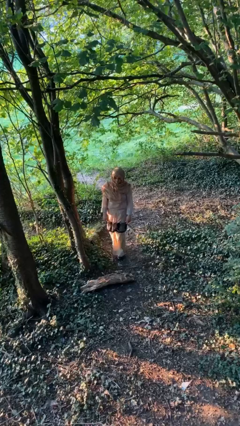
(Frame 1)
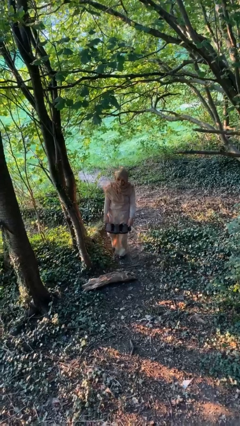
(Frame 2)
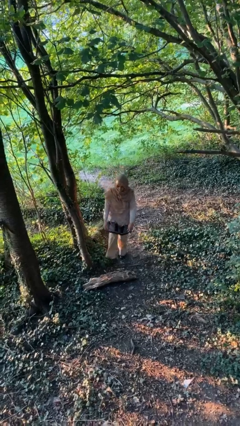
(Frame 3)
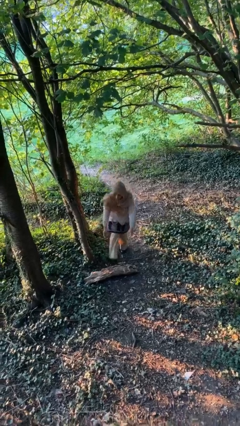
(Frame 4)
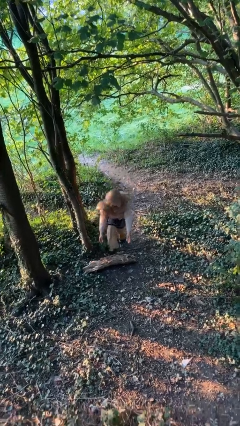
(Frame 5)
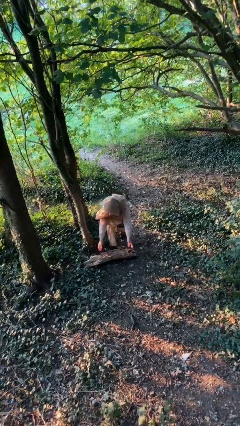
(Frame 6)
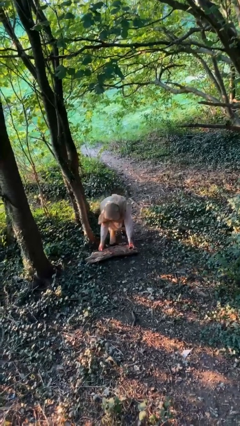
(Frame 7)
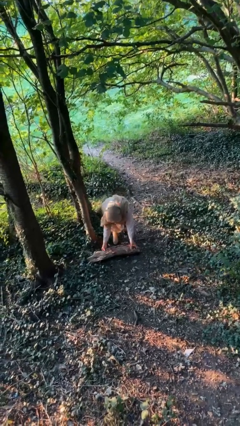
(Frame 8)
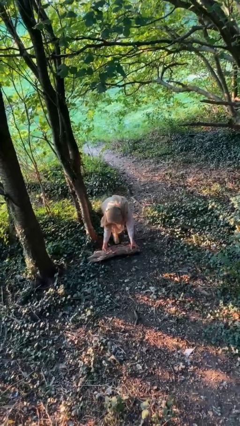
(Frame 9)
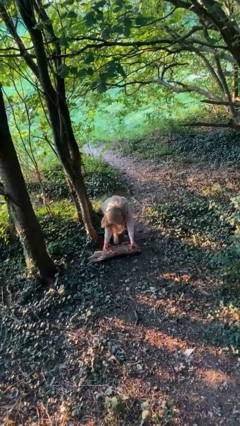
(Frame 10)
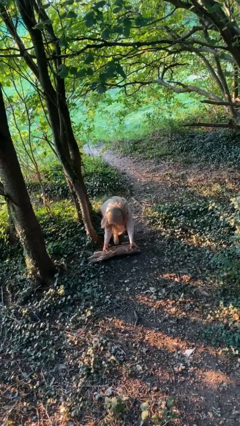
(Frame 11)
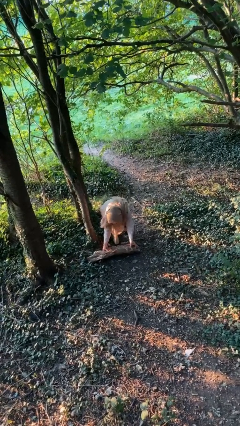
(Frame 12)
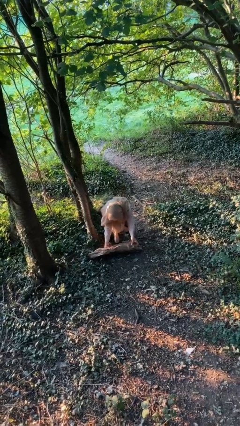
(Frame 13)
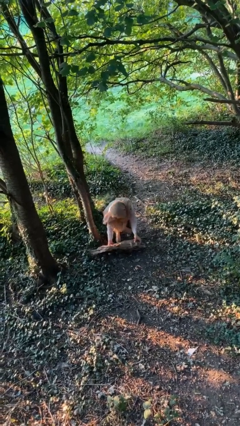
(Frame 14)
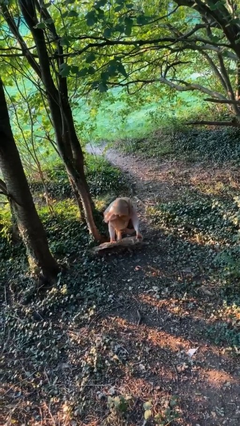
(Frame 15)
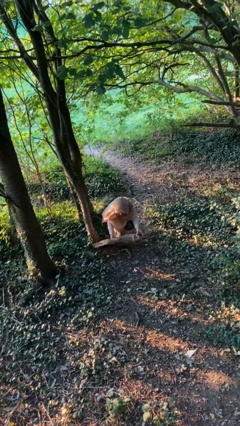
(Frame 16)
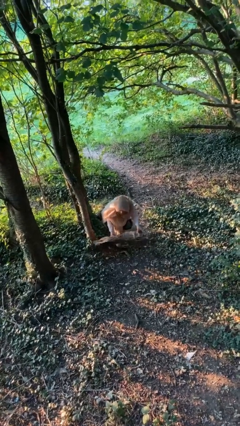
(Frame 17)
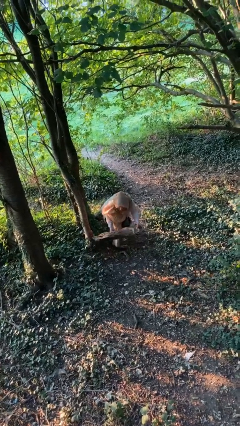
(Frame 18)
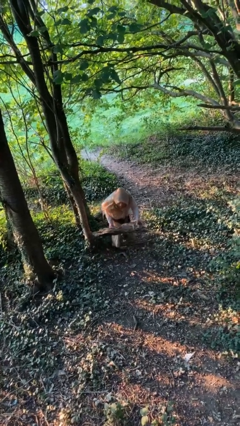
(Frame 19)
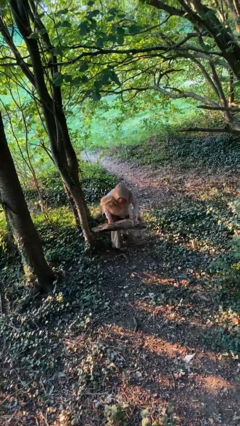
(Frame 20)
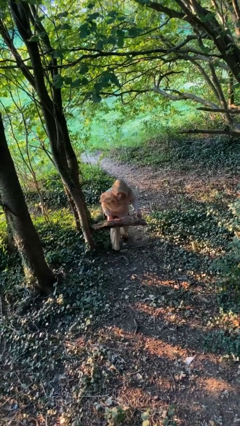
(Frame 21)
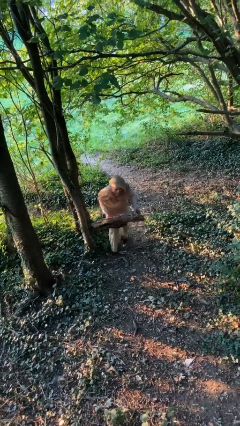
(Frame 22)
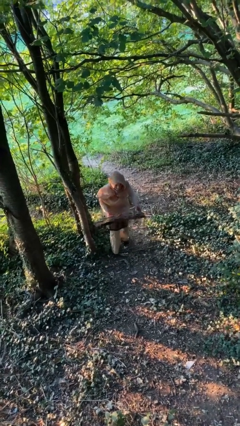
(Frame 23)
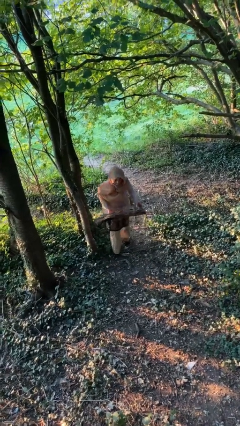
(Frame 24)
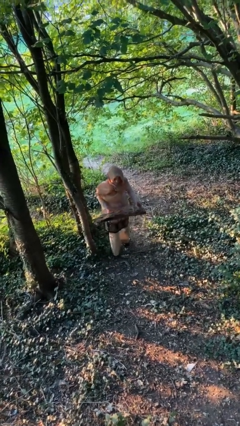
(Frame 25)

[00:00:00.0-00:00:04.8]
person picks up object from floor

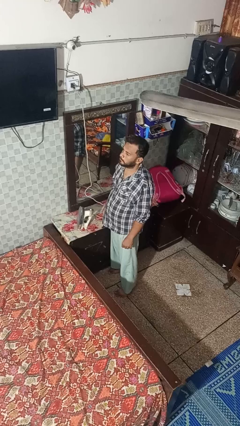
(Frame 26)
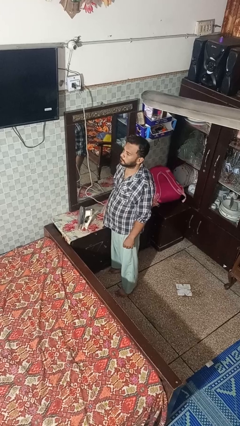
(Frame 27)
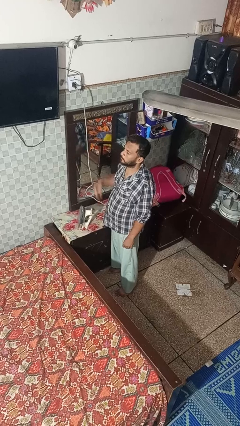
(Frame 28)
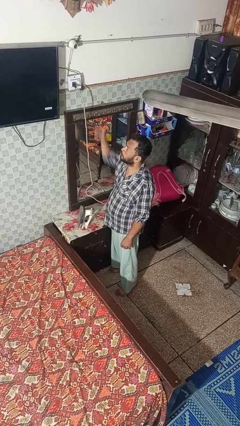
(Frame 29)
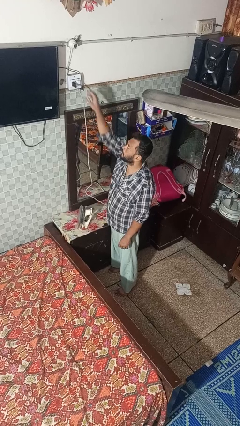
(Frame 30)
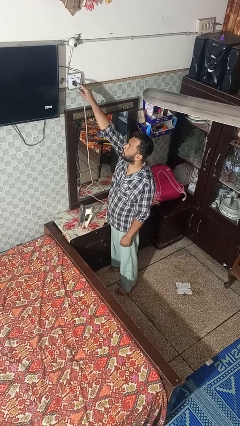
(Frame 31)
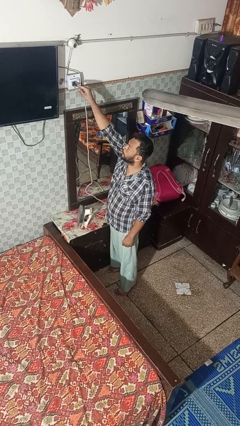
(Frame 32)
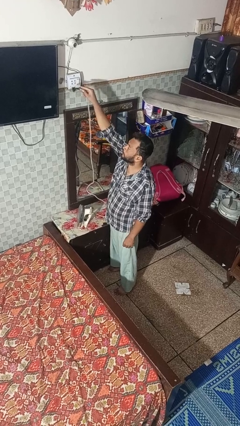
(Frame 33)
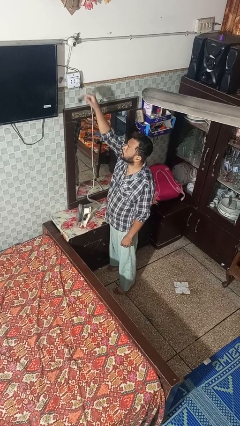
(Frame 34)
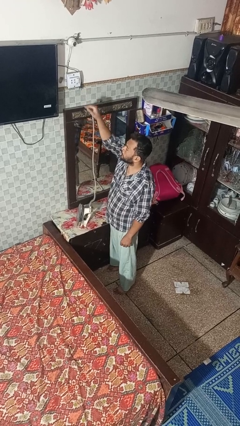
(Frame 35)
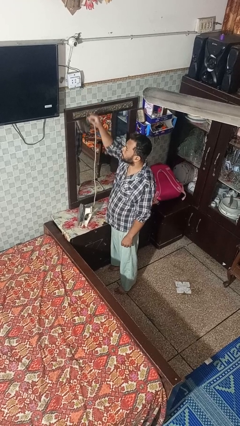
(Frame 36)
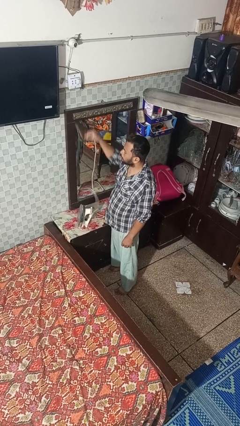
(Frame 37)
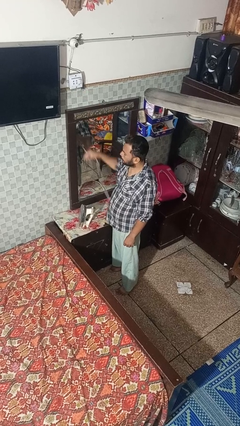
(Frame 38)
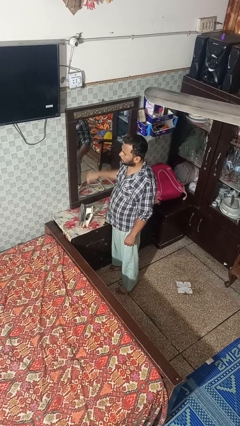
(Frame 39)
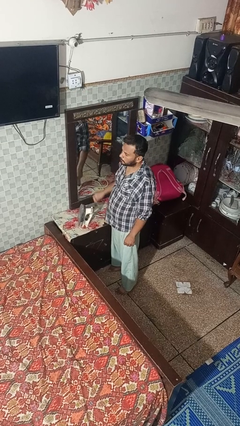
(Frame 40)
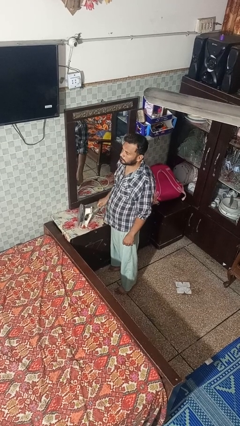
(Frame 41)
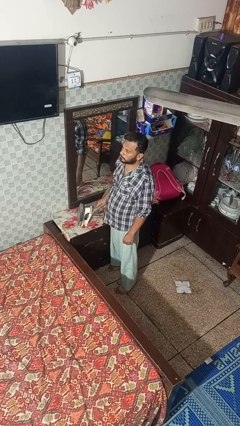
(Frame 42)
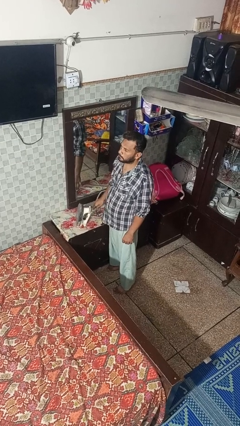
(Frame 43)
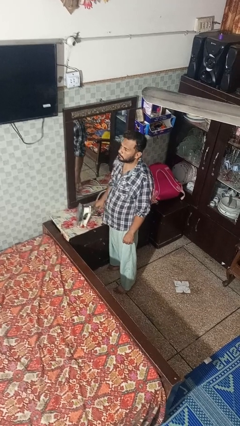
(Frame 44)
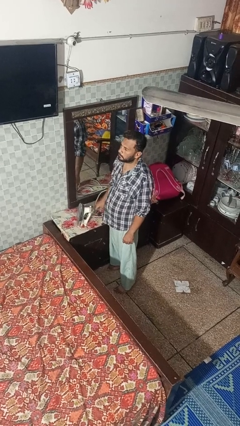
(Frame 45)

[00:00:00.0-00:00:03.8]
person unplugs from electrical socket

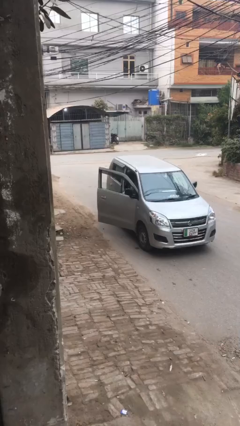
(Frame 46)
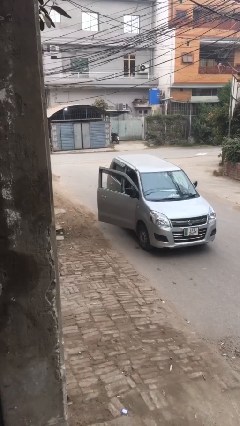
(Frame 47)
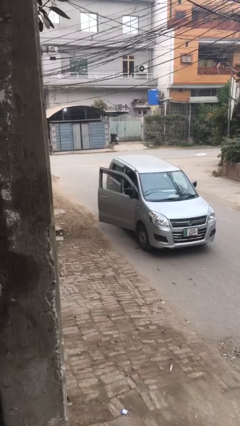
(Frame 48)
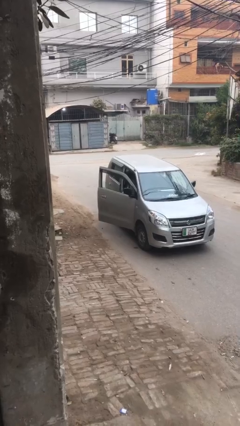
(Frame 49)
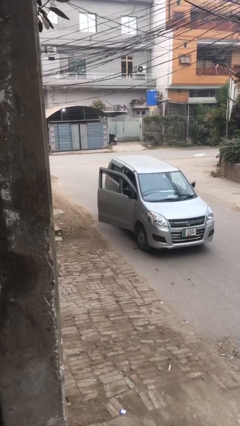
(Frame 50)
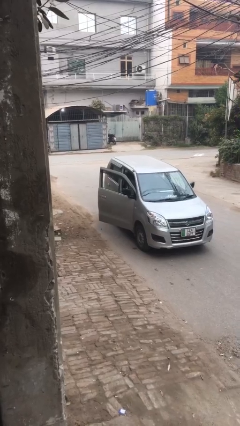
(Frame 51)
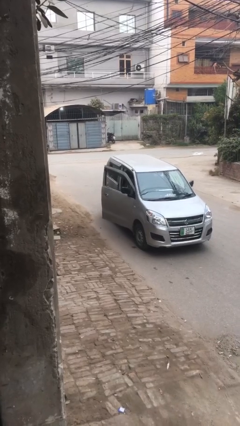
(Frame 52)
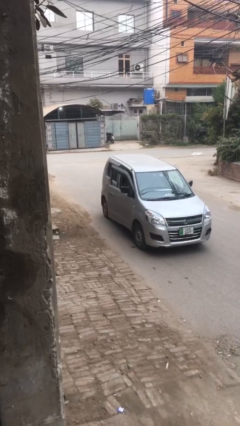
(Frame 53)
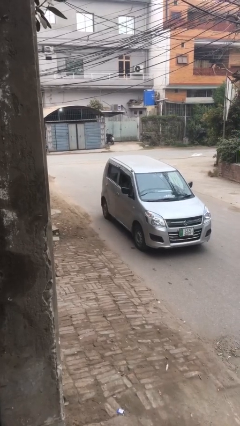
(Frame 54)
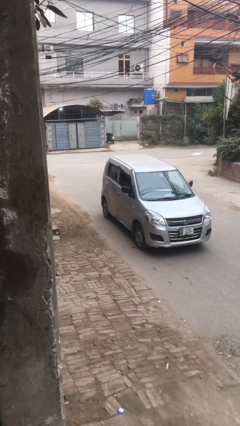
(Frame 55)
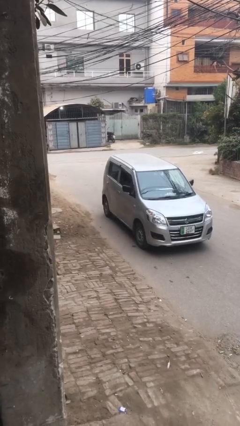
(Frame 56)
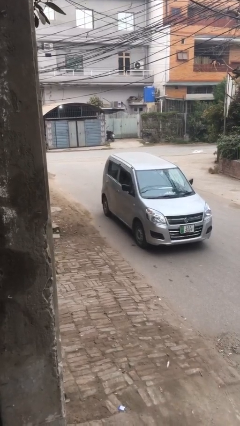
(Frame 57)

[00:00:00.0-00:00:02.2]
person closes car door

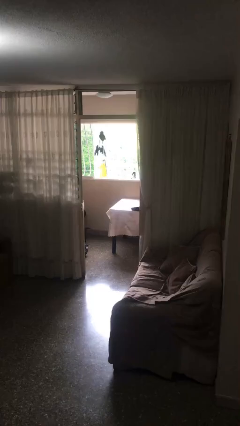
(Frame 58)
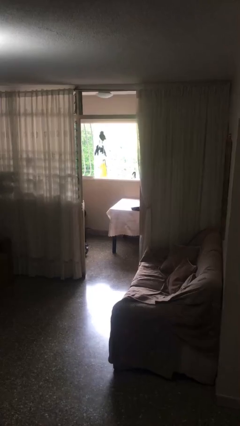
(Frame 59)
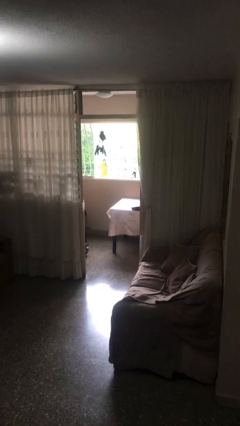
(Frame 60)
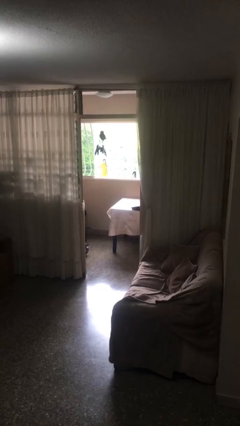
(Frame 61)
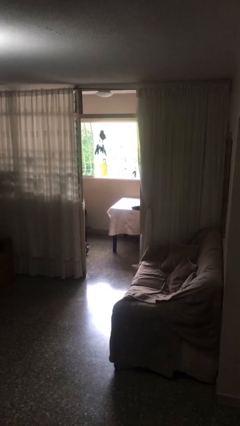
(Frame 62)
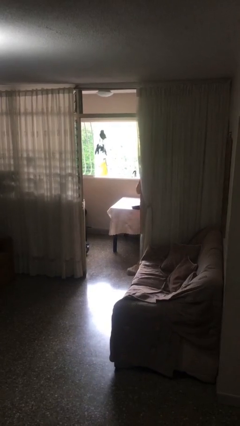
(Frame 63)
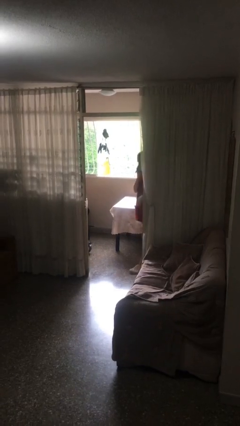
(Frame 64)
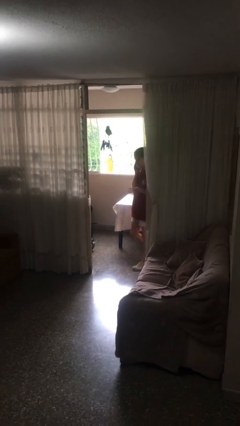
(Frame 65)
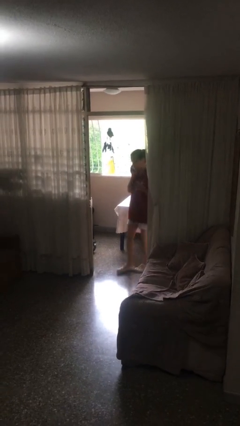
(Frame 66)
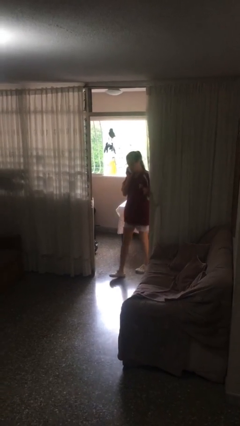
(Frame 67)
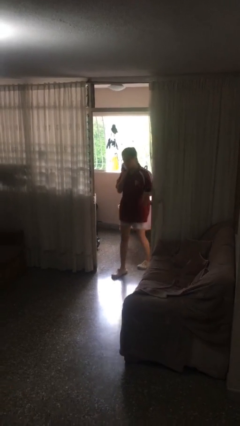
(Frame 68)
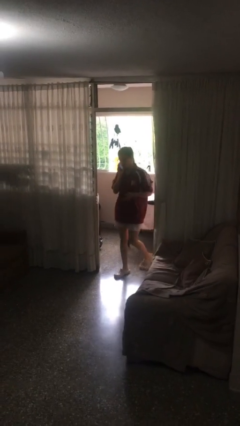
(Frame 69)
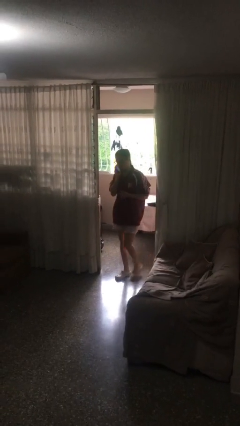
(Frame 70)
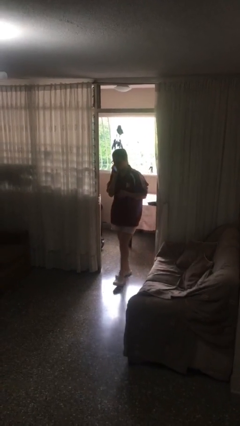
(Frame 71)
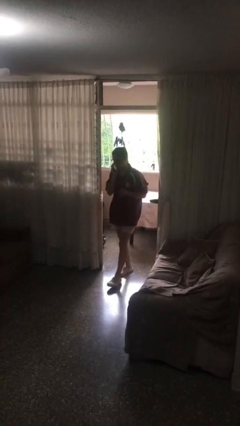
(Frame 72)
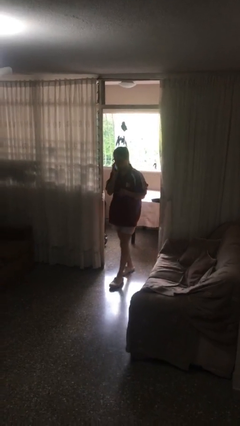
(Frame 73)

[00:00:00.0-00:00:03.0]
person enters scene through structure

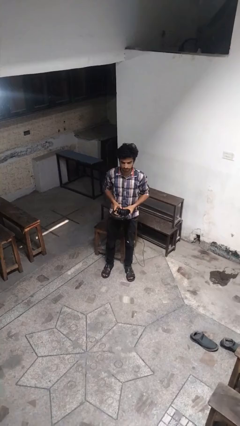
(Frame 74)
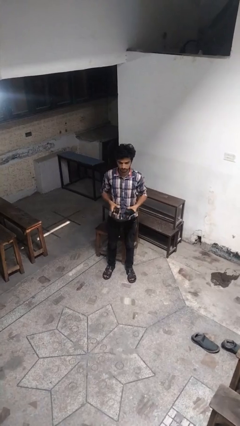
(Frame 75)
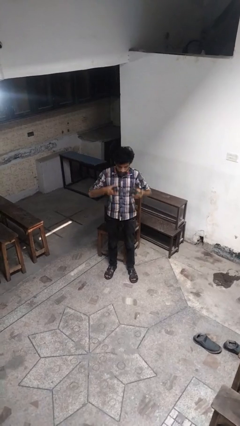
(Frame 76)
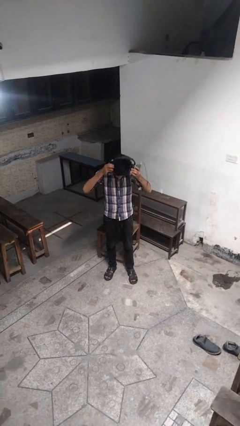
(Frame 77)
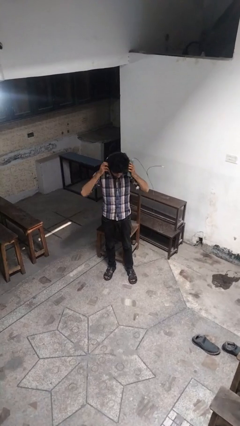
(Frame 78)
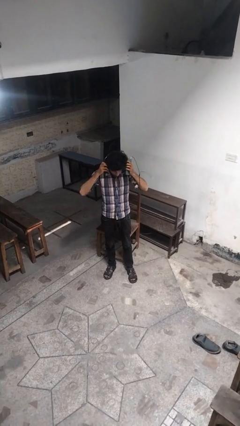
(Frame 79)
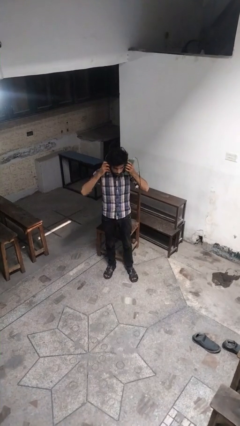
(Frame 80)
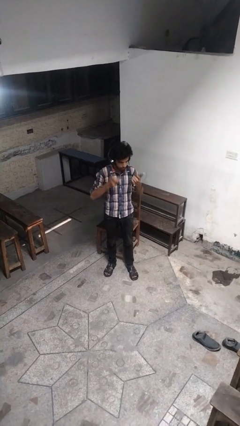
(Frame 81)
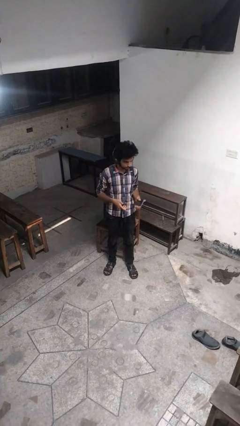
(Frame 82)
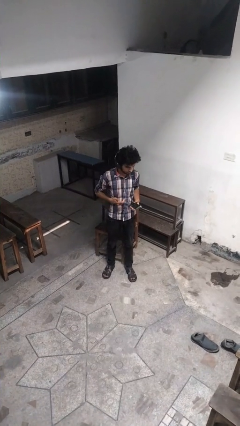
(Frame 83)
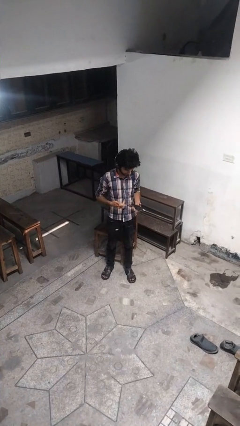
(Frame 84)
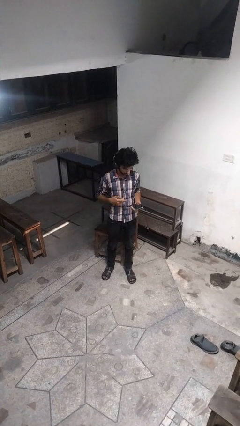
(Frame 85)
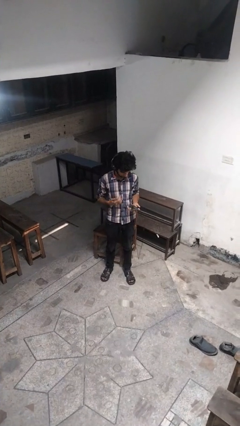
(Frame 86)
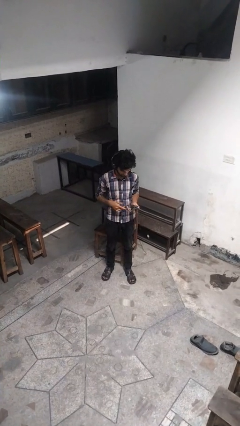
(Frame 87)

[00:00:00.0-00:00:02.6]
person puts on headphones

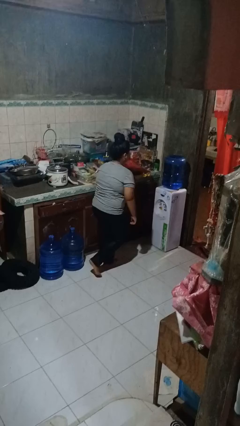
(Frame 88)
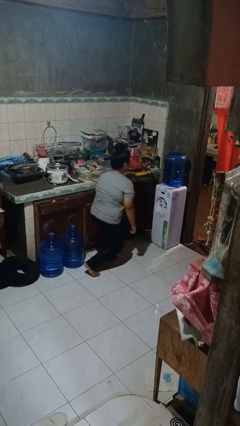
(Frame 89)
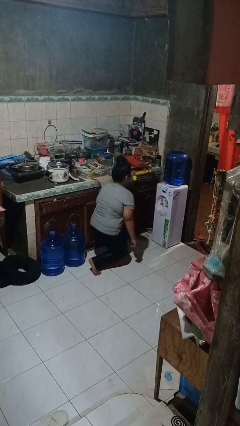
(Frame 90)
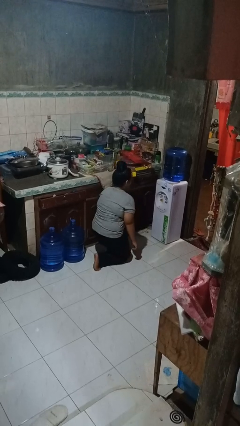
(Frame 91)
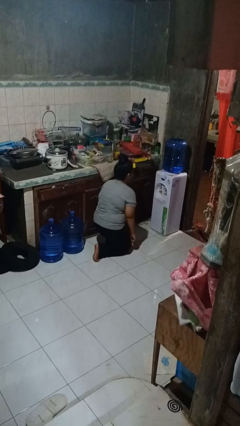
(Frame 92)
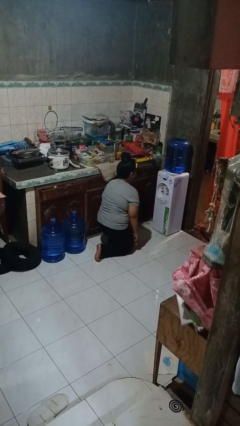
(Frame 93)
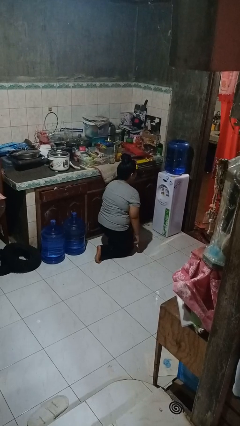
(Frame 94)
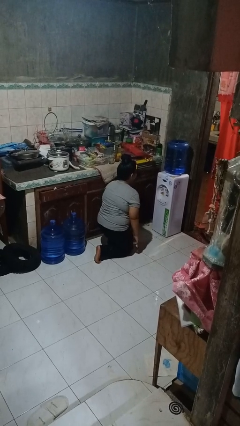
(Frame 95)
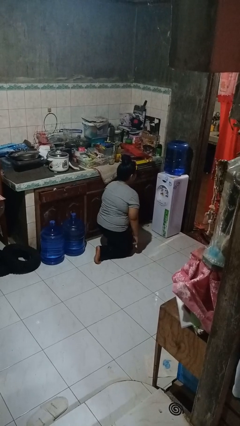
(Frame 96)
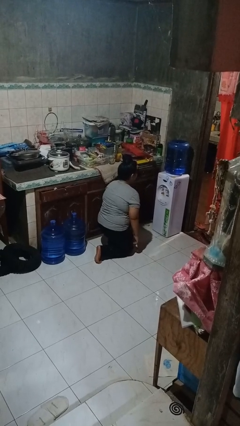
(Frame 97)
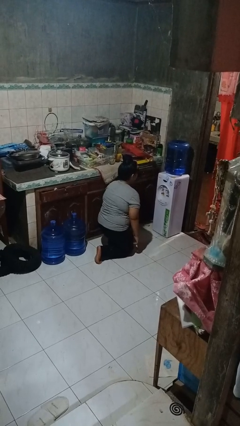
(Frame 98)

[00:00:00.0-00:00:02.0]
person kneels
